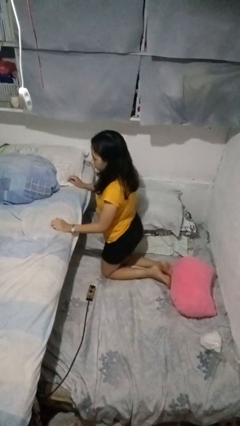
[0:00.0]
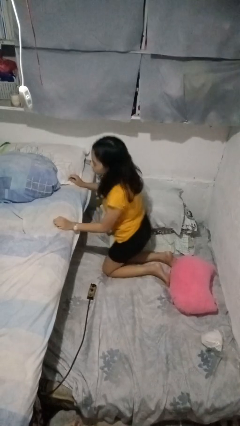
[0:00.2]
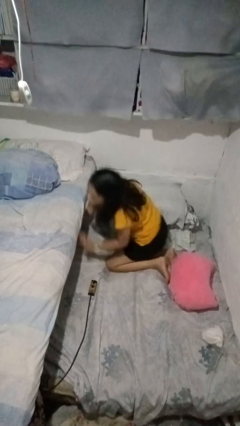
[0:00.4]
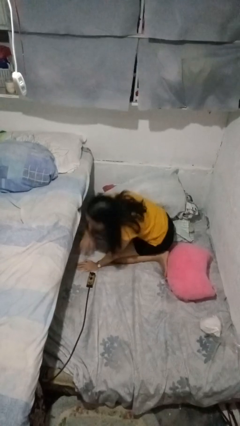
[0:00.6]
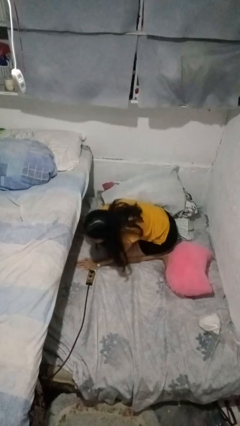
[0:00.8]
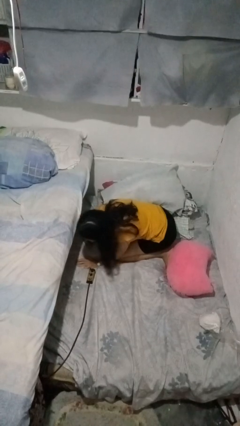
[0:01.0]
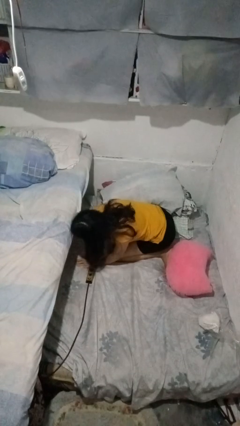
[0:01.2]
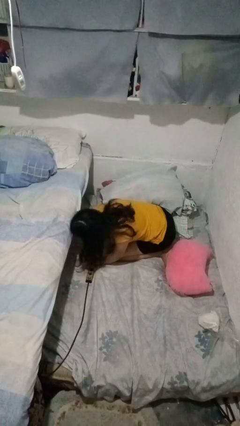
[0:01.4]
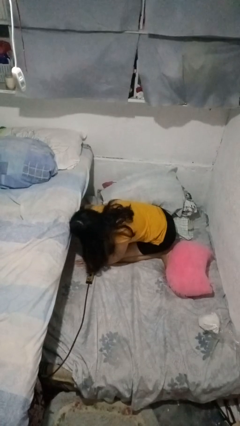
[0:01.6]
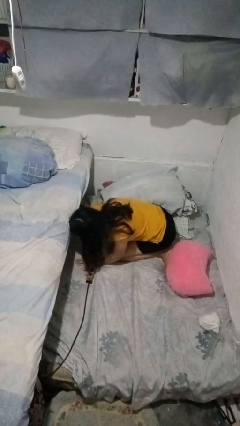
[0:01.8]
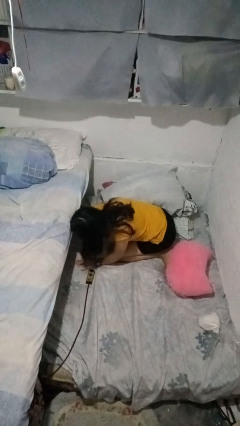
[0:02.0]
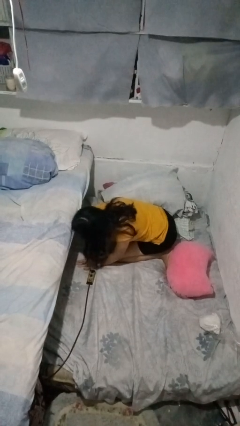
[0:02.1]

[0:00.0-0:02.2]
person searches under bed

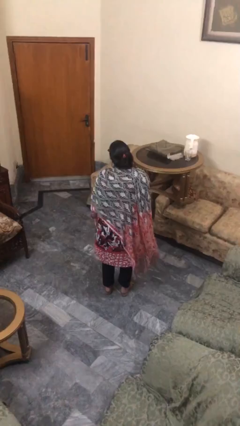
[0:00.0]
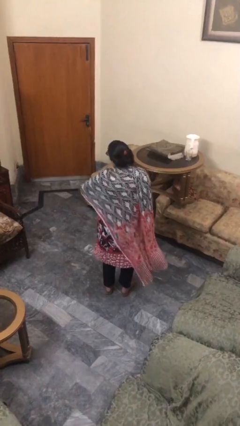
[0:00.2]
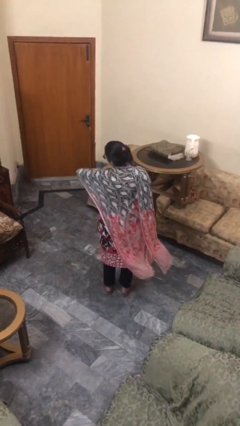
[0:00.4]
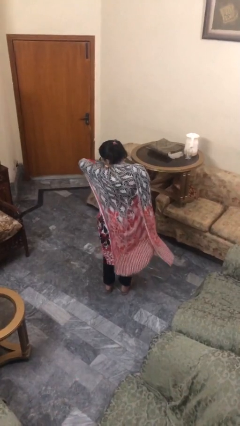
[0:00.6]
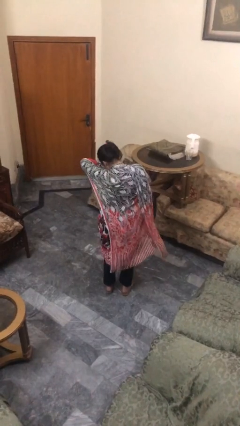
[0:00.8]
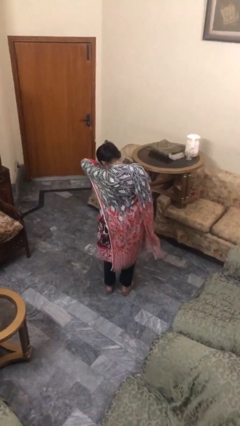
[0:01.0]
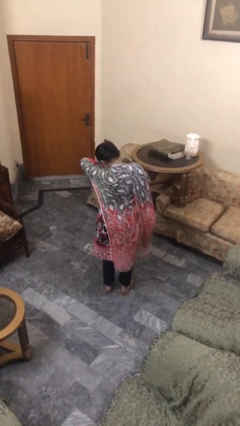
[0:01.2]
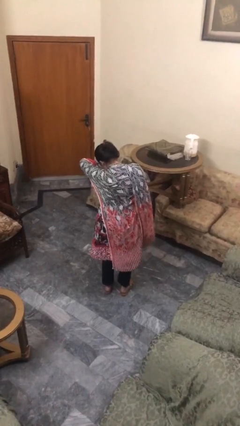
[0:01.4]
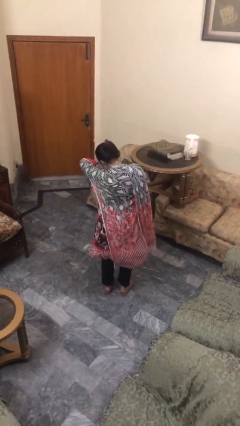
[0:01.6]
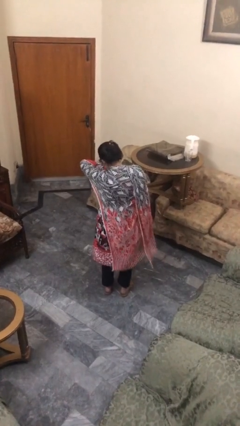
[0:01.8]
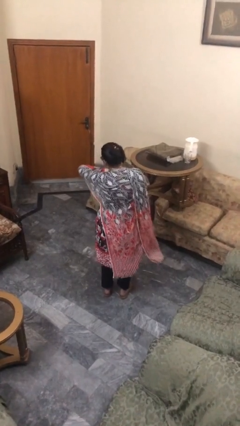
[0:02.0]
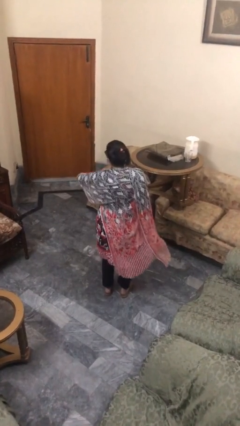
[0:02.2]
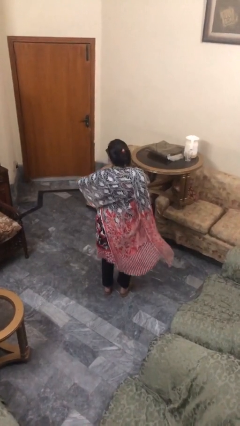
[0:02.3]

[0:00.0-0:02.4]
person sneezes into arm

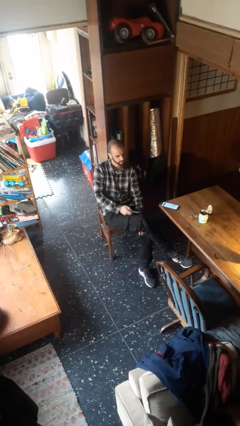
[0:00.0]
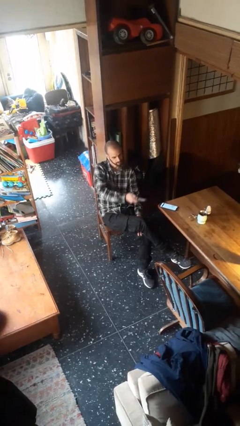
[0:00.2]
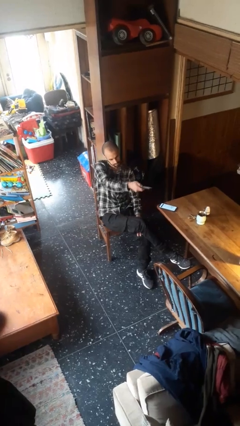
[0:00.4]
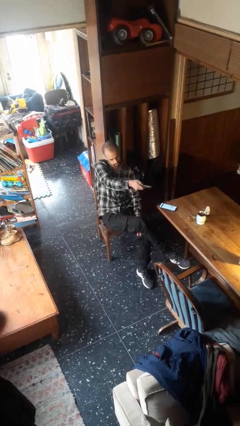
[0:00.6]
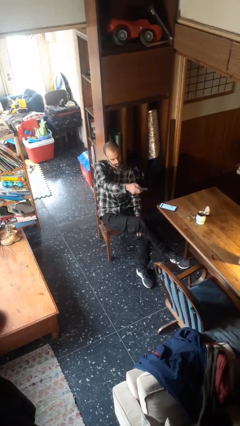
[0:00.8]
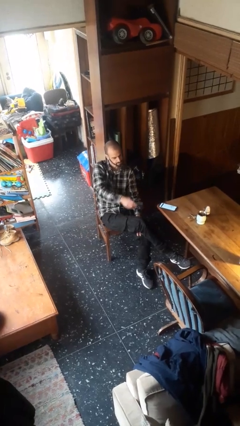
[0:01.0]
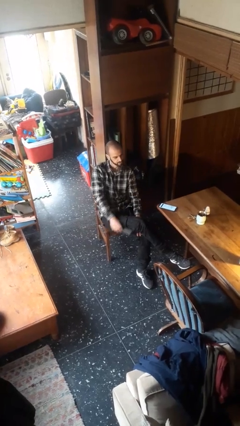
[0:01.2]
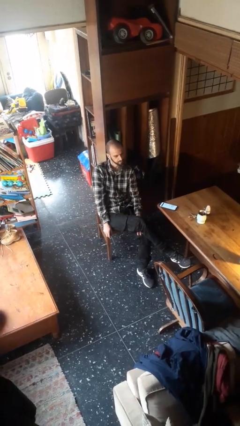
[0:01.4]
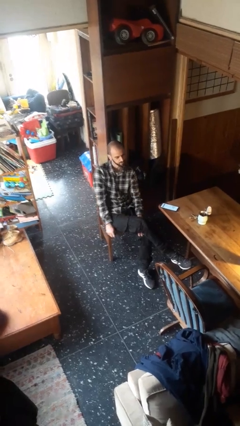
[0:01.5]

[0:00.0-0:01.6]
person uses television remote

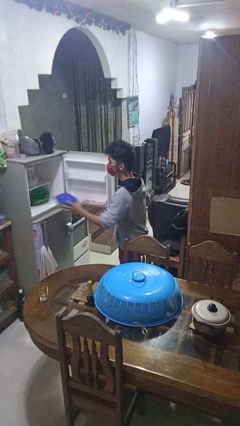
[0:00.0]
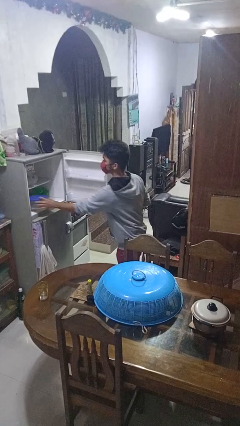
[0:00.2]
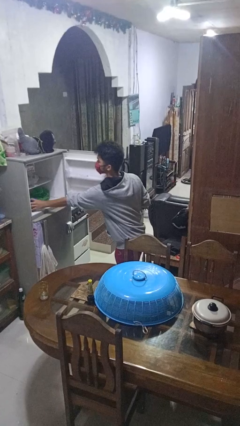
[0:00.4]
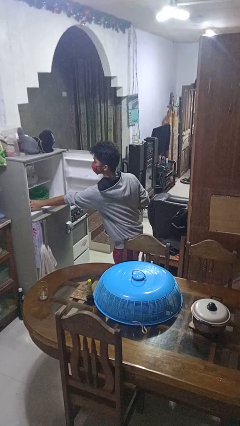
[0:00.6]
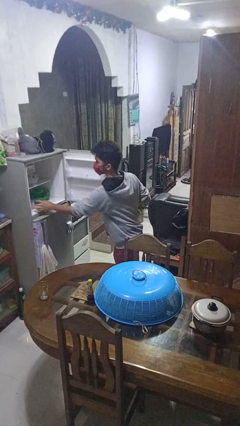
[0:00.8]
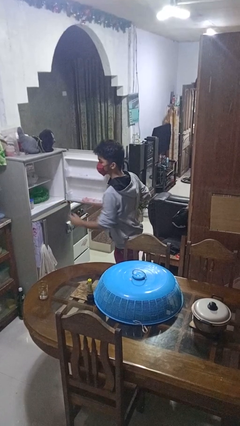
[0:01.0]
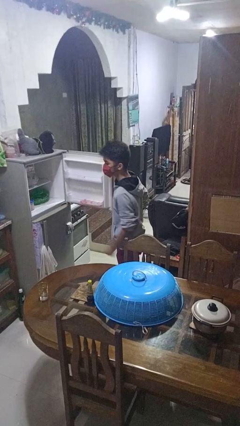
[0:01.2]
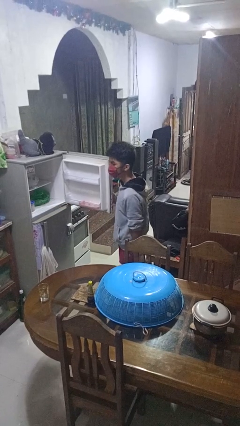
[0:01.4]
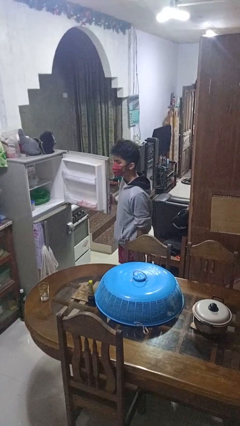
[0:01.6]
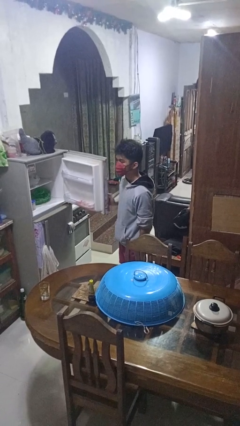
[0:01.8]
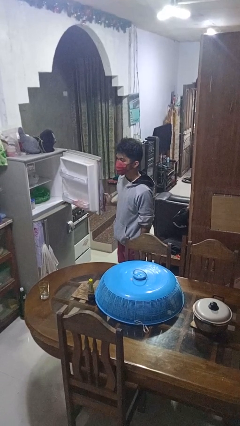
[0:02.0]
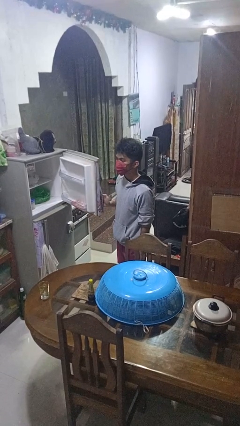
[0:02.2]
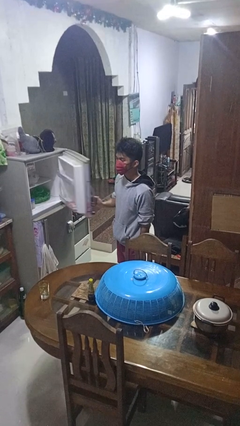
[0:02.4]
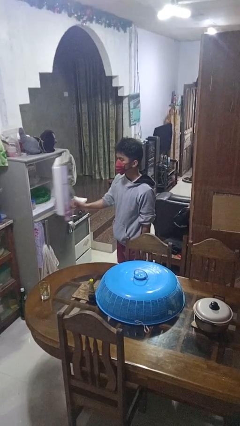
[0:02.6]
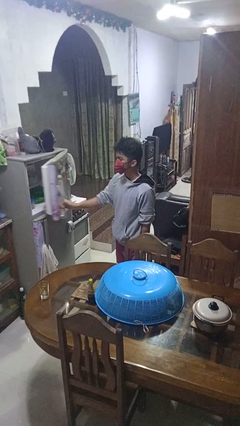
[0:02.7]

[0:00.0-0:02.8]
person puts object into refrigerator

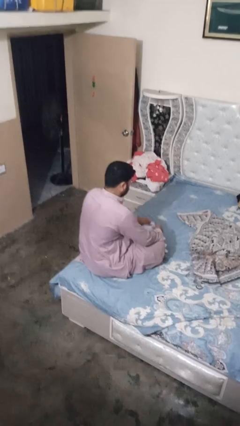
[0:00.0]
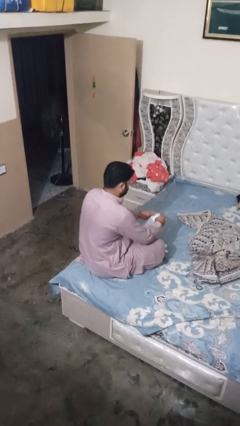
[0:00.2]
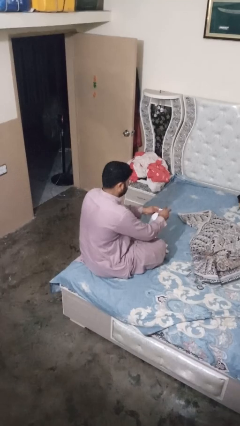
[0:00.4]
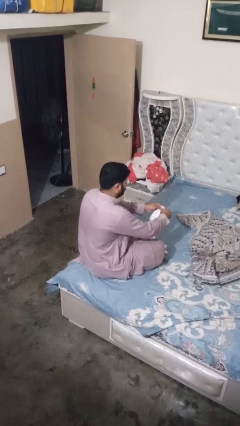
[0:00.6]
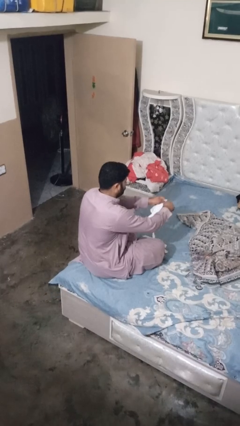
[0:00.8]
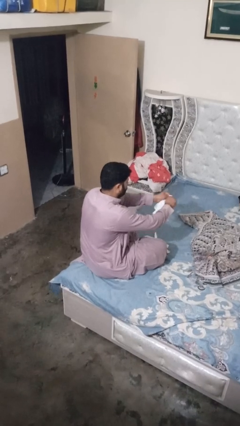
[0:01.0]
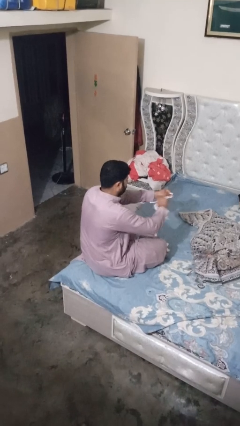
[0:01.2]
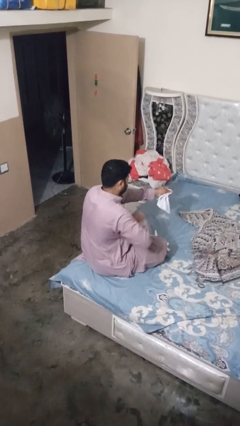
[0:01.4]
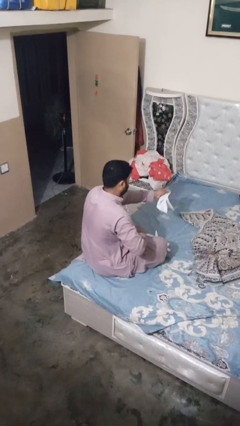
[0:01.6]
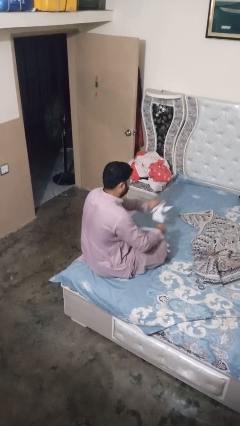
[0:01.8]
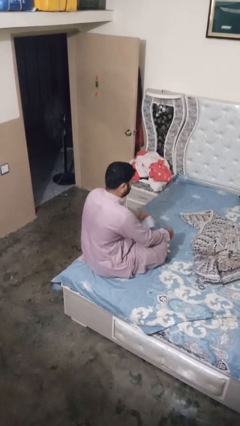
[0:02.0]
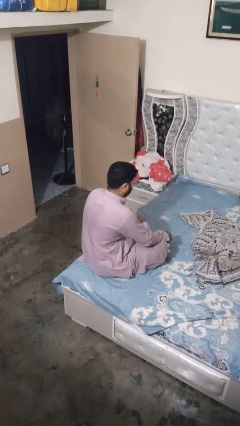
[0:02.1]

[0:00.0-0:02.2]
person tears paper

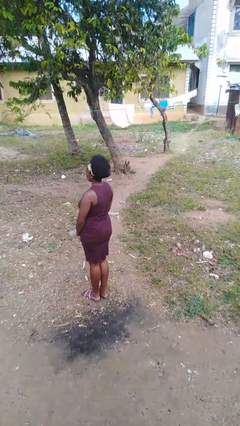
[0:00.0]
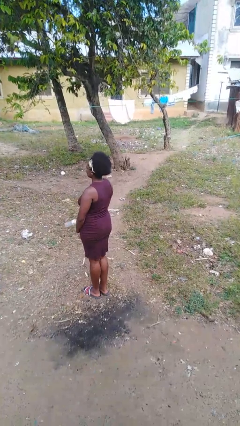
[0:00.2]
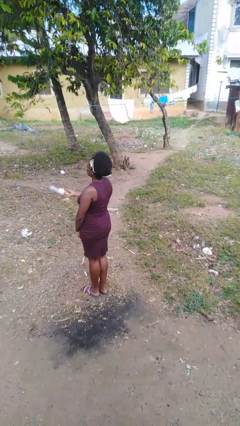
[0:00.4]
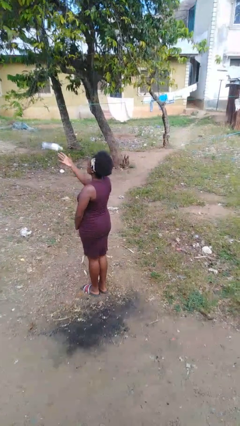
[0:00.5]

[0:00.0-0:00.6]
person throws object into air

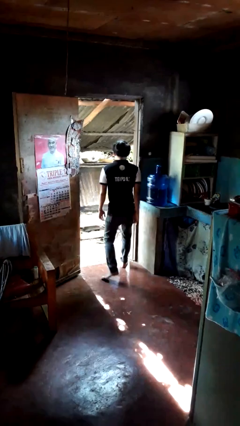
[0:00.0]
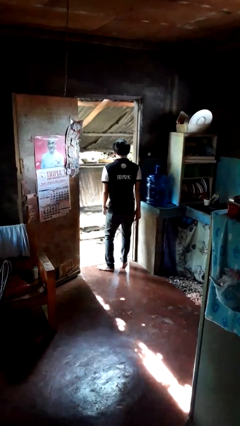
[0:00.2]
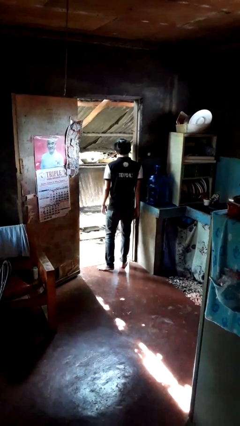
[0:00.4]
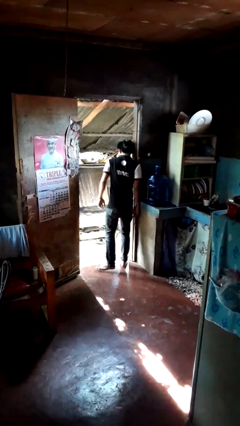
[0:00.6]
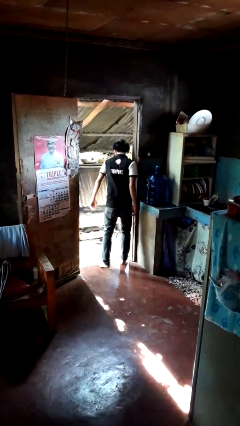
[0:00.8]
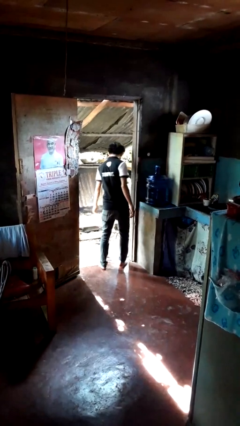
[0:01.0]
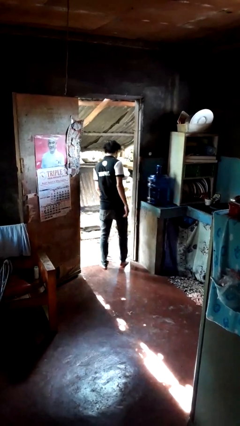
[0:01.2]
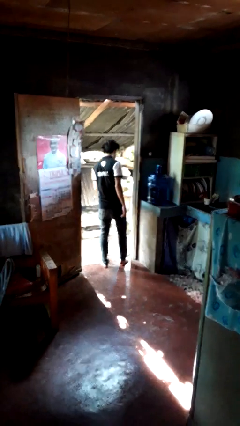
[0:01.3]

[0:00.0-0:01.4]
person bumps into wall

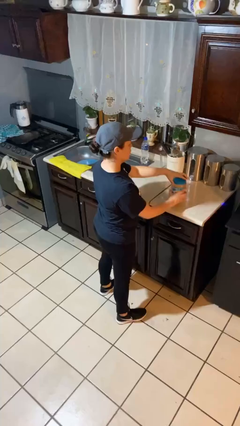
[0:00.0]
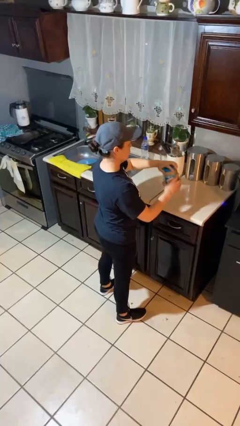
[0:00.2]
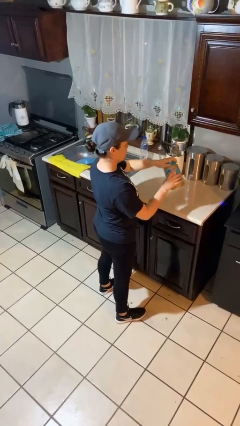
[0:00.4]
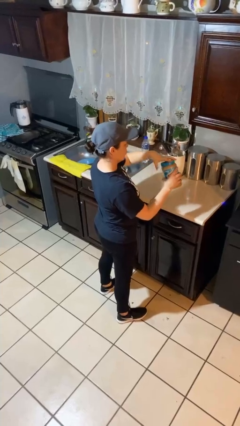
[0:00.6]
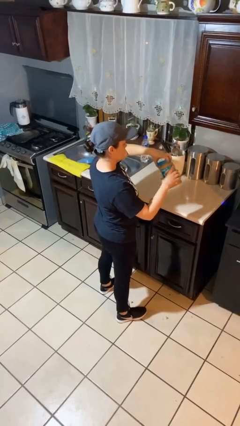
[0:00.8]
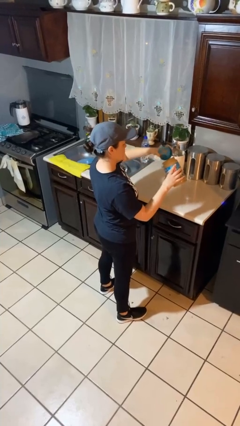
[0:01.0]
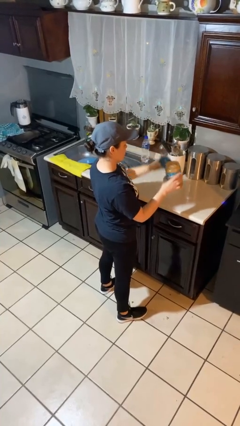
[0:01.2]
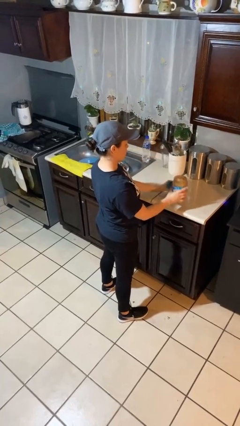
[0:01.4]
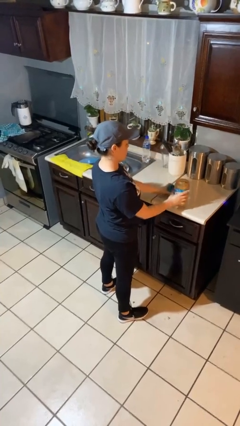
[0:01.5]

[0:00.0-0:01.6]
person opens jar

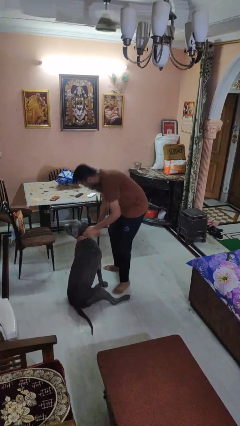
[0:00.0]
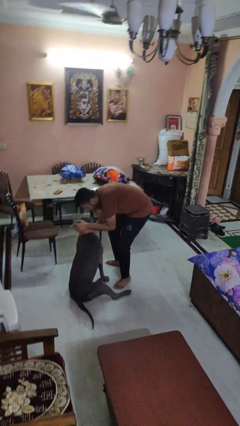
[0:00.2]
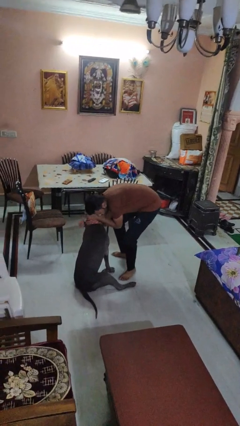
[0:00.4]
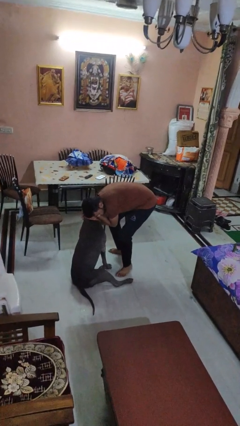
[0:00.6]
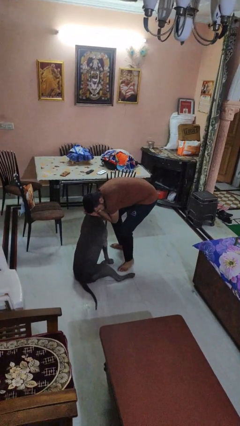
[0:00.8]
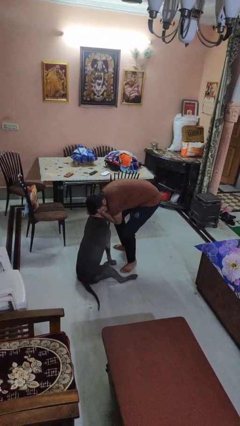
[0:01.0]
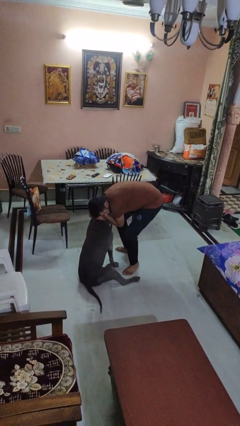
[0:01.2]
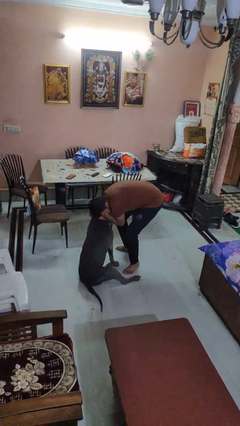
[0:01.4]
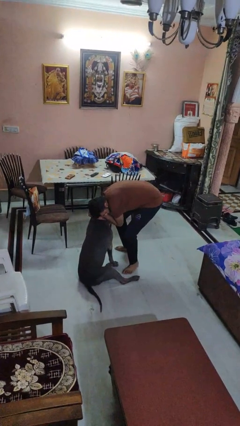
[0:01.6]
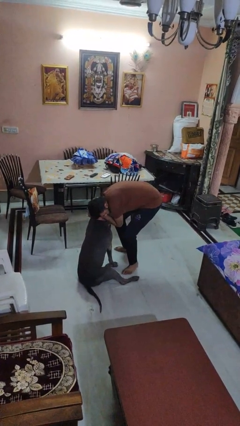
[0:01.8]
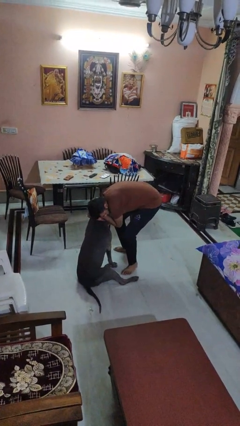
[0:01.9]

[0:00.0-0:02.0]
person hugs dog
